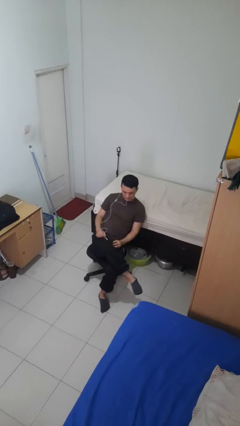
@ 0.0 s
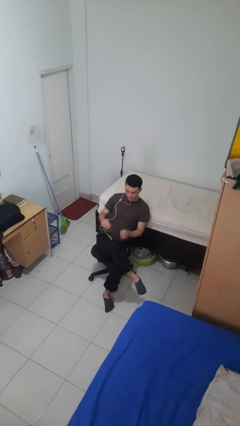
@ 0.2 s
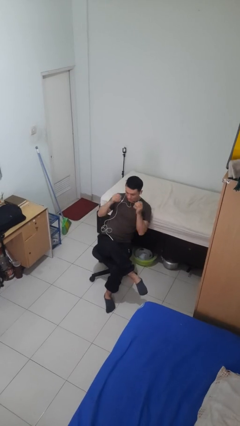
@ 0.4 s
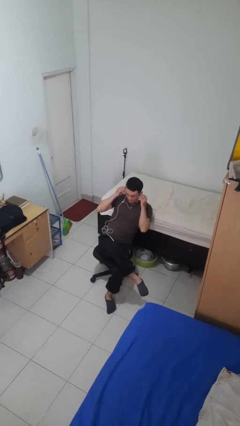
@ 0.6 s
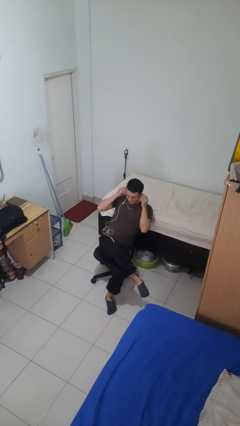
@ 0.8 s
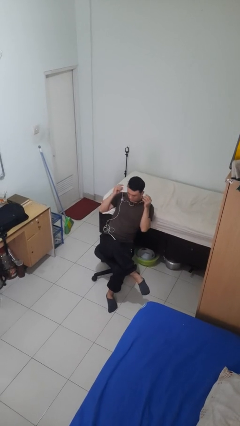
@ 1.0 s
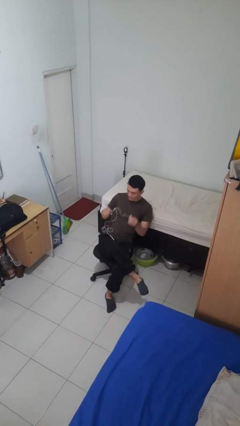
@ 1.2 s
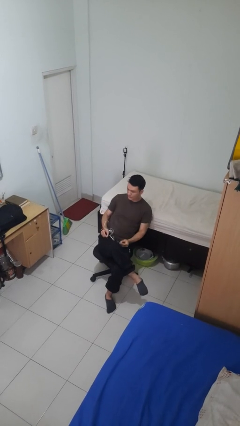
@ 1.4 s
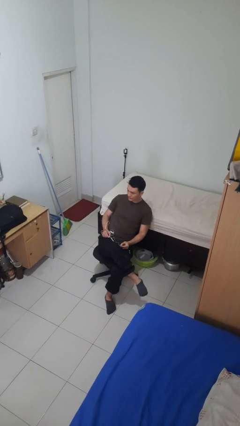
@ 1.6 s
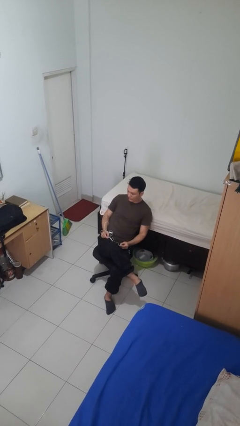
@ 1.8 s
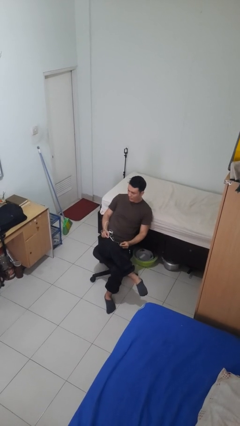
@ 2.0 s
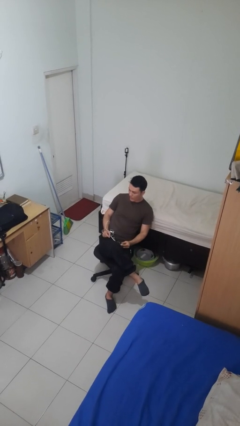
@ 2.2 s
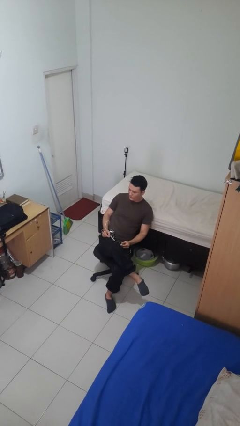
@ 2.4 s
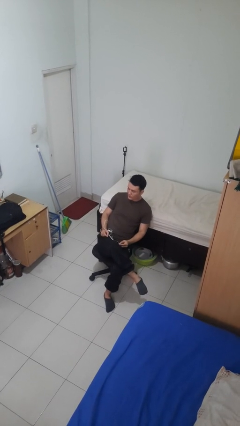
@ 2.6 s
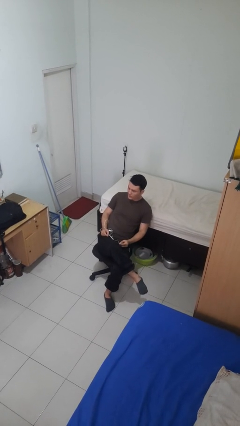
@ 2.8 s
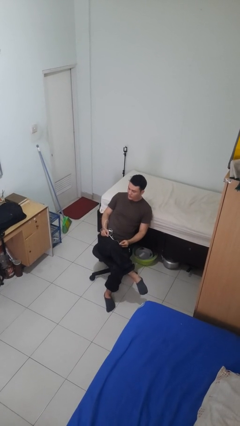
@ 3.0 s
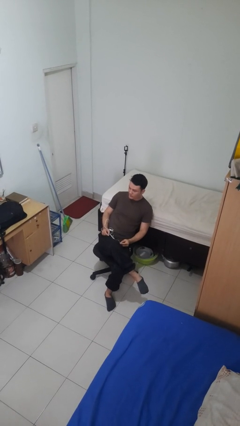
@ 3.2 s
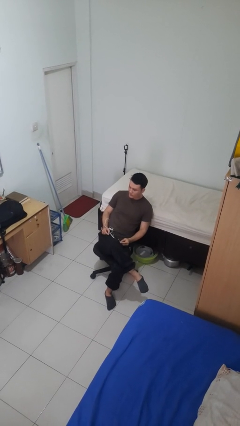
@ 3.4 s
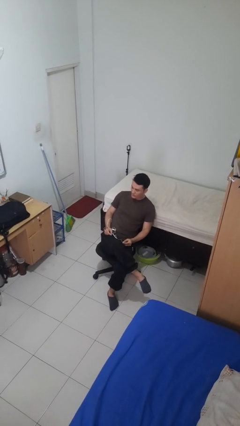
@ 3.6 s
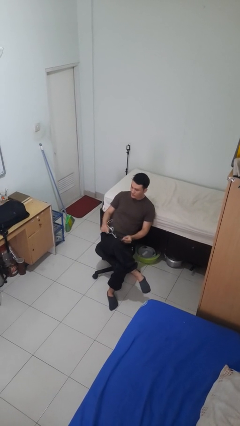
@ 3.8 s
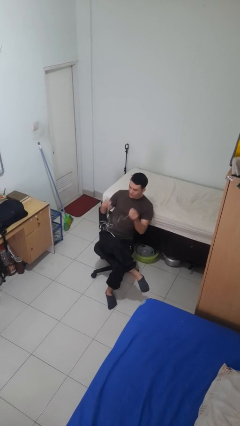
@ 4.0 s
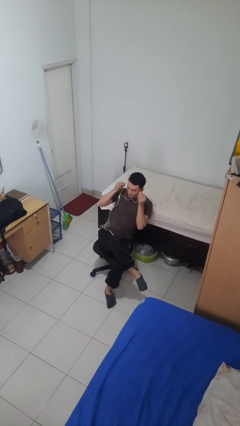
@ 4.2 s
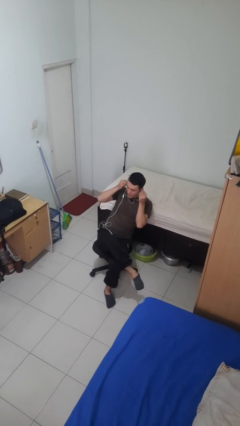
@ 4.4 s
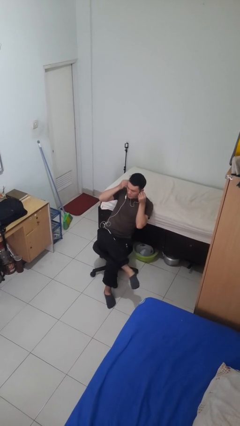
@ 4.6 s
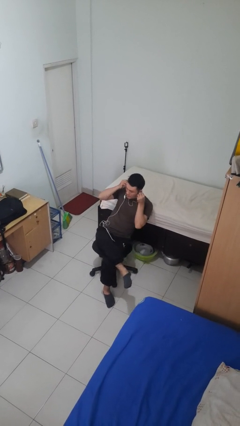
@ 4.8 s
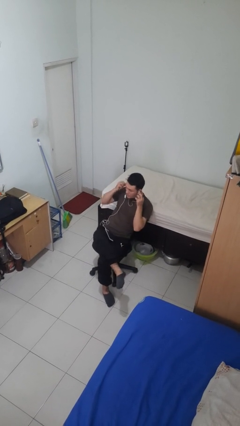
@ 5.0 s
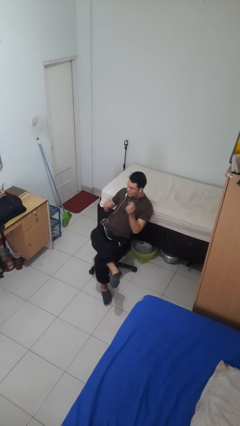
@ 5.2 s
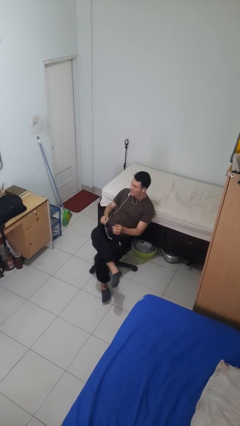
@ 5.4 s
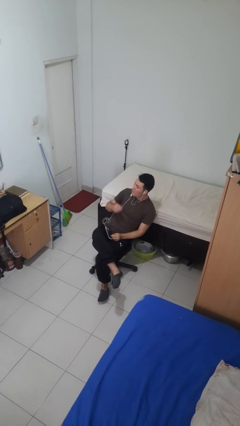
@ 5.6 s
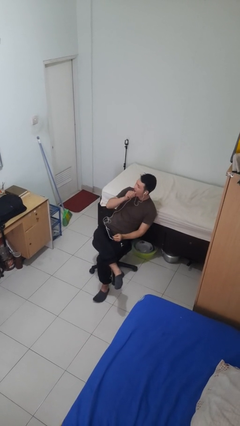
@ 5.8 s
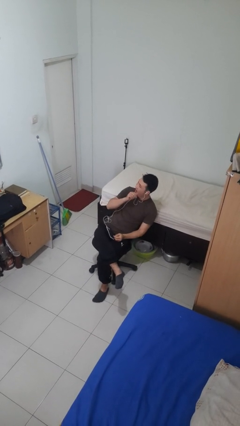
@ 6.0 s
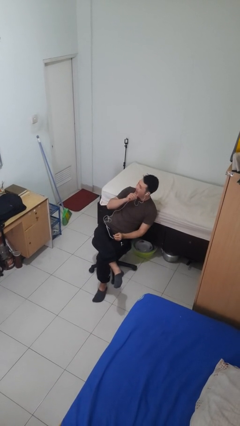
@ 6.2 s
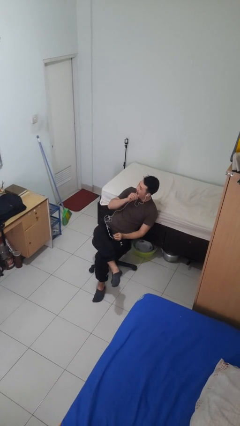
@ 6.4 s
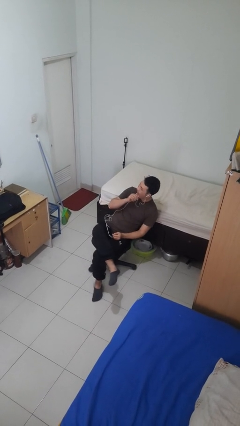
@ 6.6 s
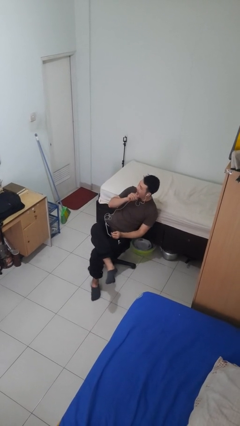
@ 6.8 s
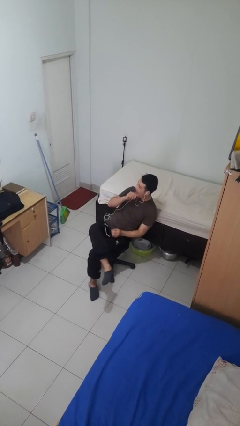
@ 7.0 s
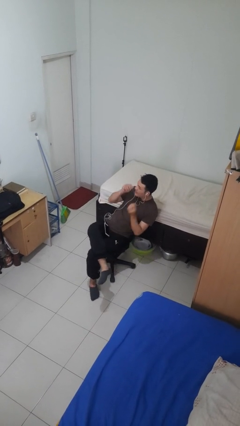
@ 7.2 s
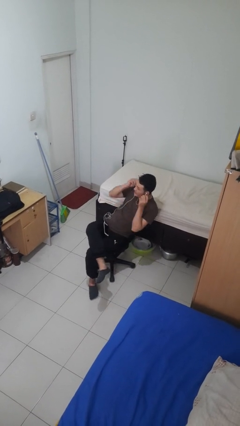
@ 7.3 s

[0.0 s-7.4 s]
person takes off headphones

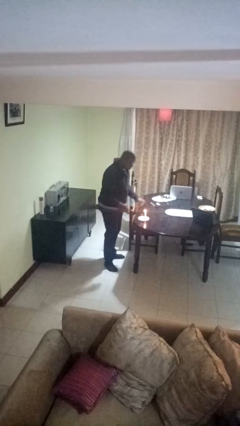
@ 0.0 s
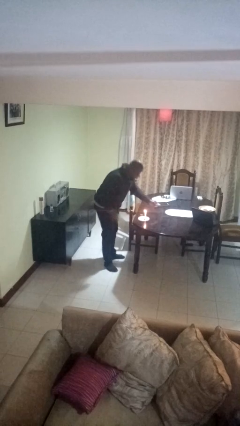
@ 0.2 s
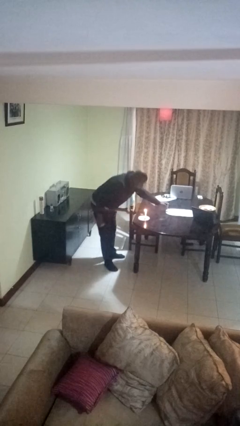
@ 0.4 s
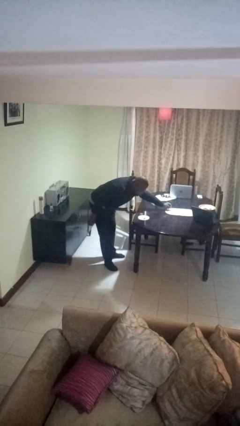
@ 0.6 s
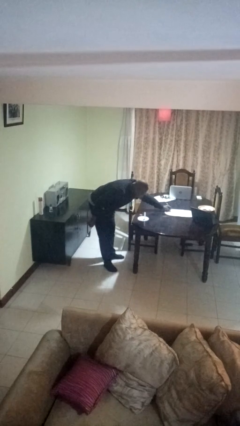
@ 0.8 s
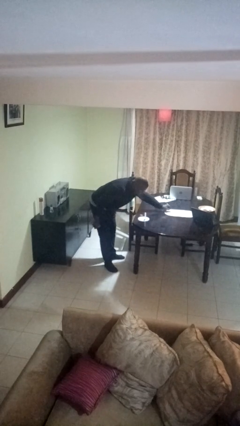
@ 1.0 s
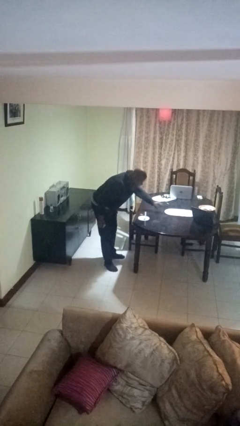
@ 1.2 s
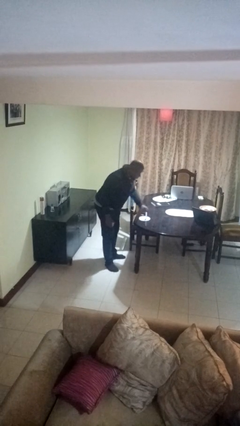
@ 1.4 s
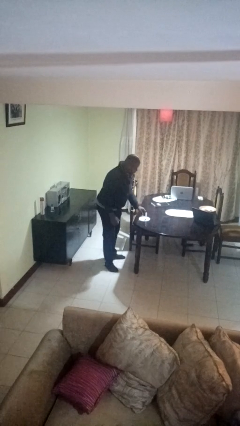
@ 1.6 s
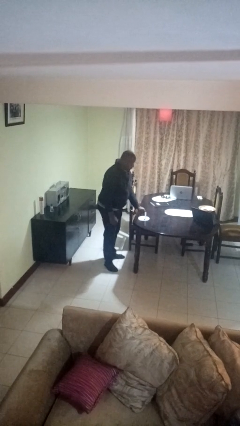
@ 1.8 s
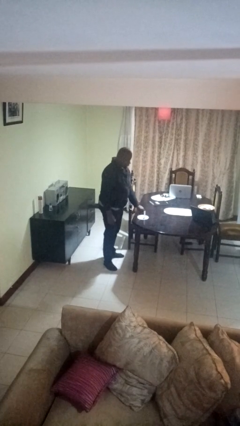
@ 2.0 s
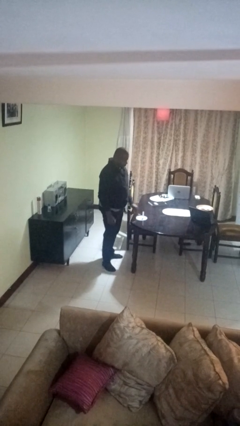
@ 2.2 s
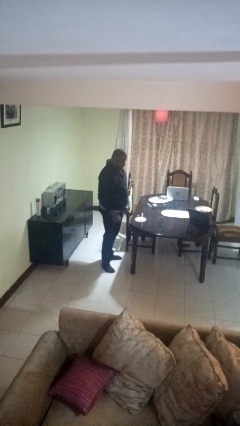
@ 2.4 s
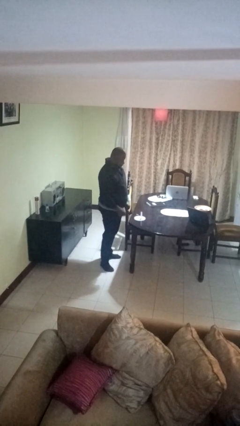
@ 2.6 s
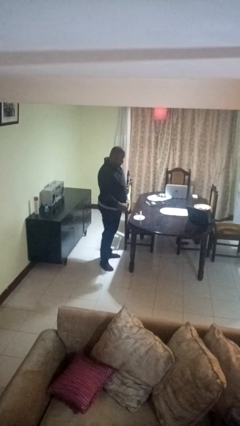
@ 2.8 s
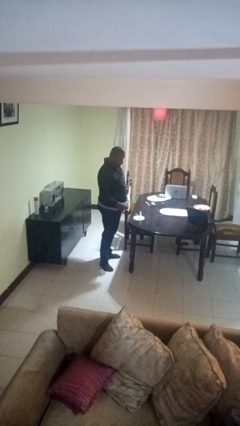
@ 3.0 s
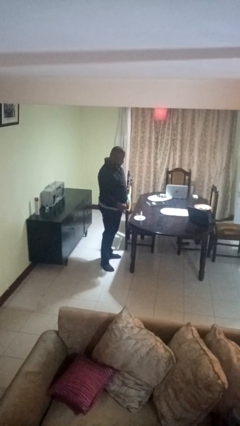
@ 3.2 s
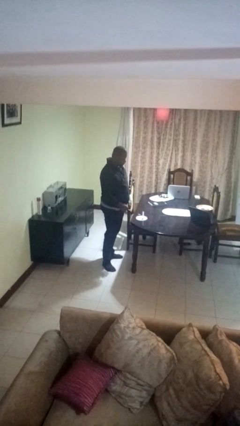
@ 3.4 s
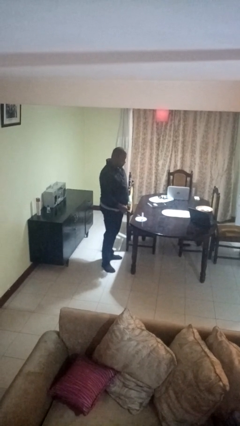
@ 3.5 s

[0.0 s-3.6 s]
person extinguishes candle

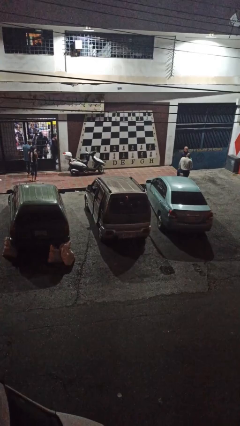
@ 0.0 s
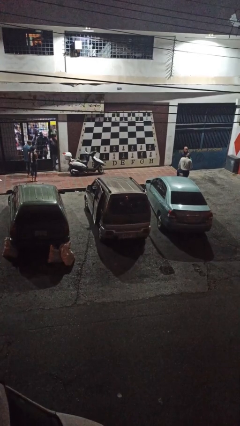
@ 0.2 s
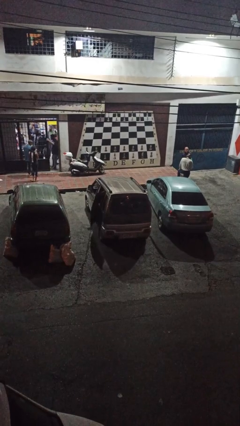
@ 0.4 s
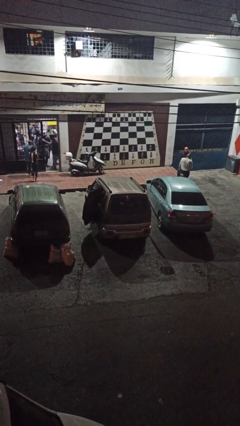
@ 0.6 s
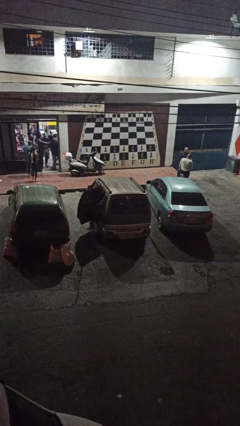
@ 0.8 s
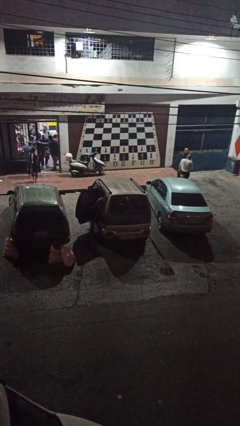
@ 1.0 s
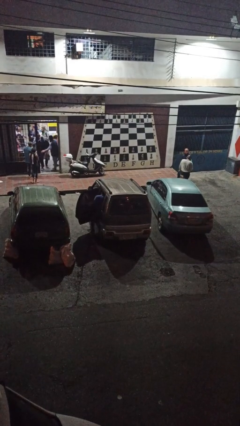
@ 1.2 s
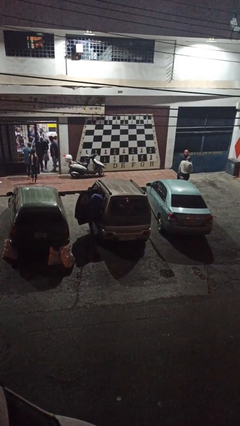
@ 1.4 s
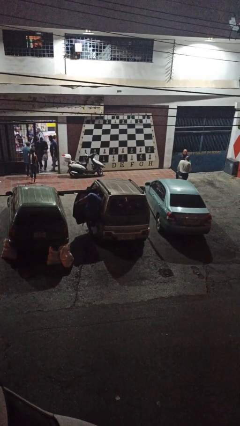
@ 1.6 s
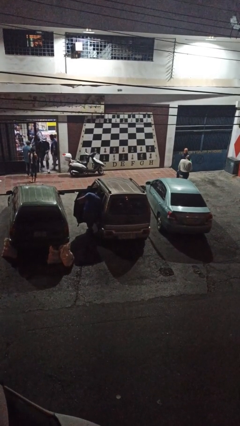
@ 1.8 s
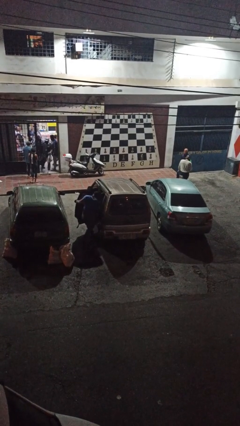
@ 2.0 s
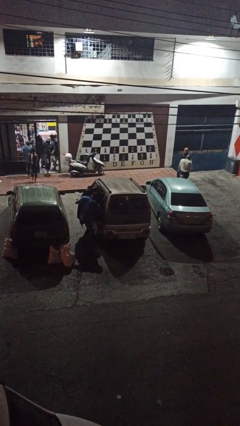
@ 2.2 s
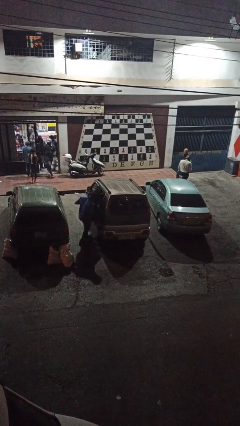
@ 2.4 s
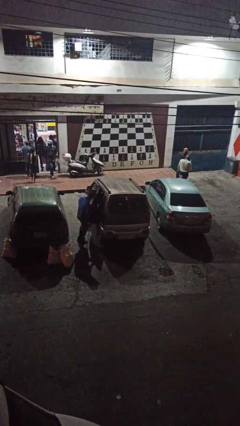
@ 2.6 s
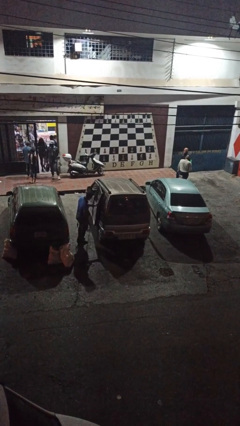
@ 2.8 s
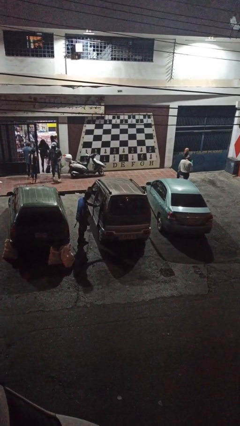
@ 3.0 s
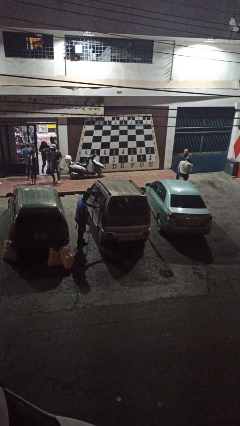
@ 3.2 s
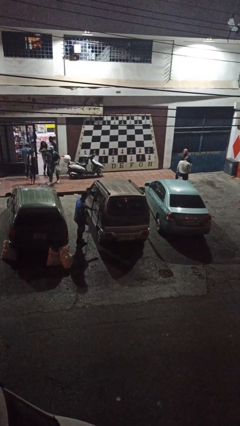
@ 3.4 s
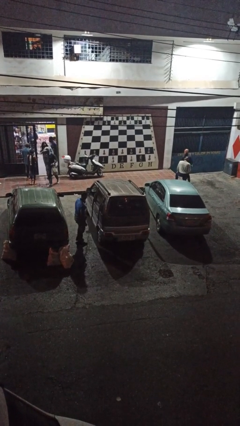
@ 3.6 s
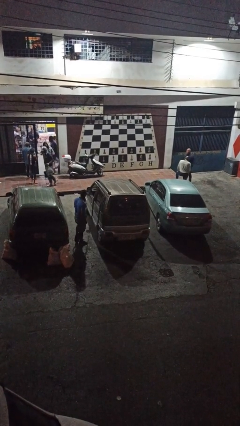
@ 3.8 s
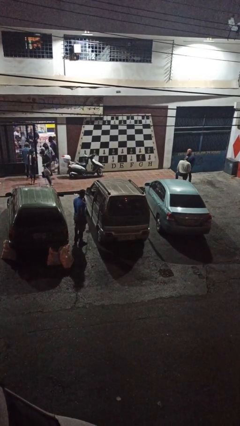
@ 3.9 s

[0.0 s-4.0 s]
car drops off person

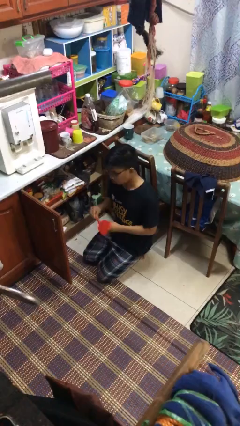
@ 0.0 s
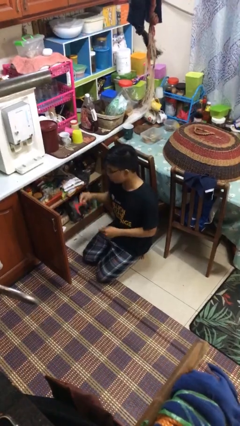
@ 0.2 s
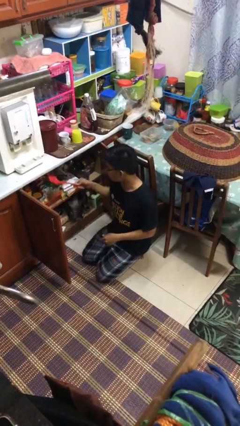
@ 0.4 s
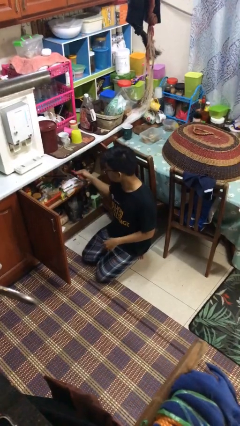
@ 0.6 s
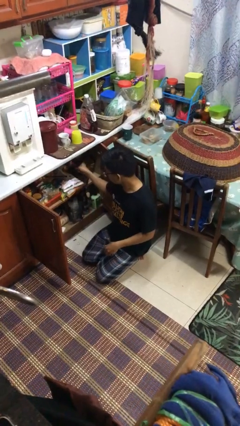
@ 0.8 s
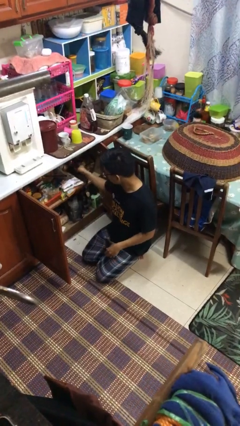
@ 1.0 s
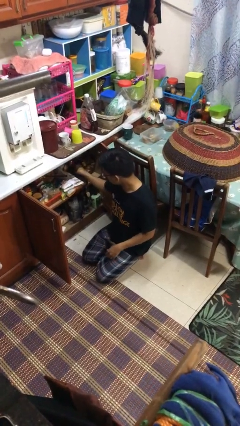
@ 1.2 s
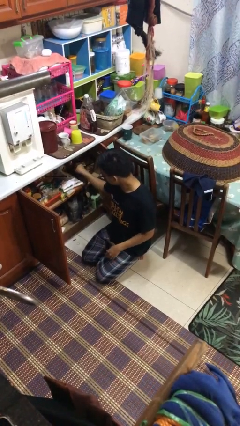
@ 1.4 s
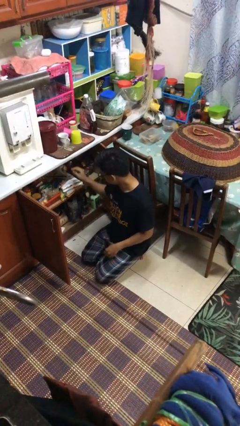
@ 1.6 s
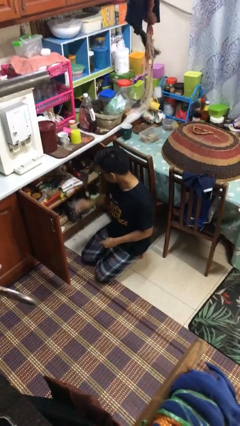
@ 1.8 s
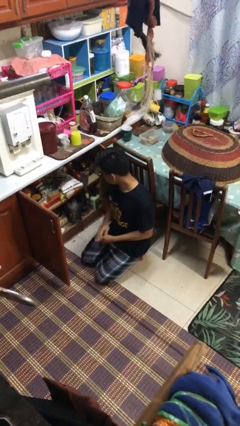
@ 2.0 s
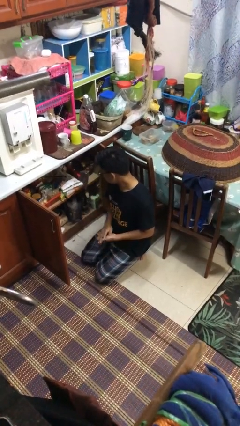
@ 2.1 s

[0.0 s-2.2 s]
person puts object into kitchen drawer

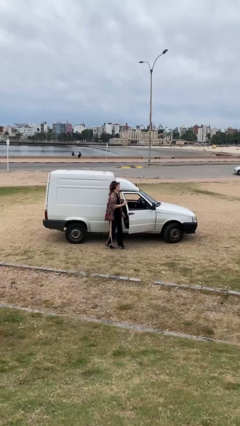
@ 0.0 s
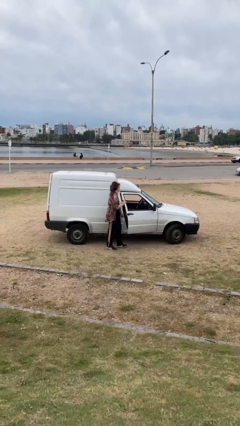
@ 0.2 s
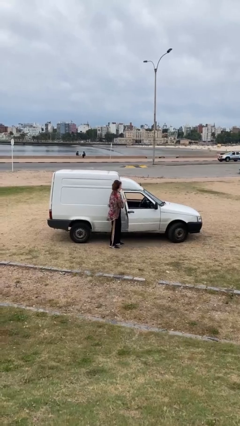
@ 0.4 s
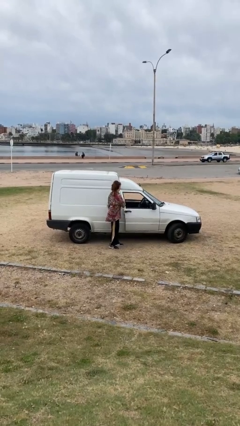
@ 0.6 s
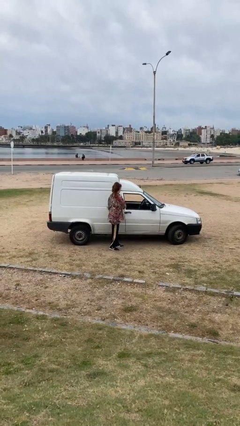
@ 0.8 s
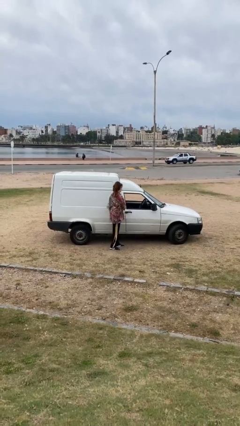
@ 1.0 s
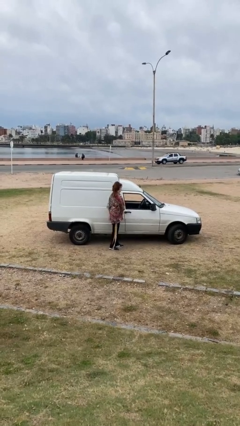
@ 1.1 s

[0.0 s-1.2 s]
person closes car door
